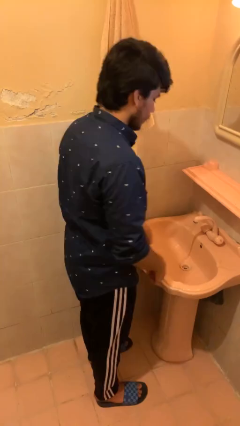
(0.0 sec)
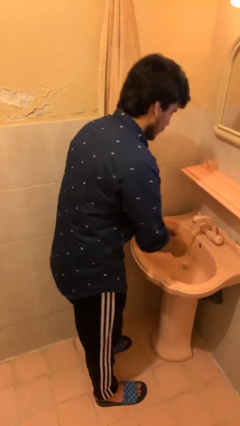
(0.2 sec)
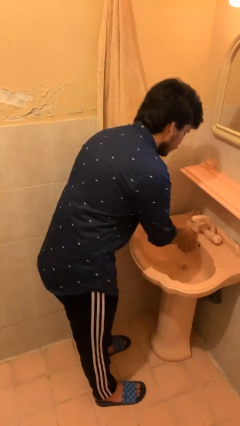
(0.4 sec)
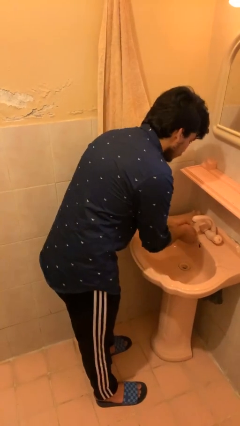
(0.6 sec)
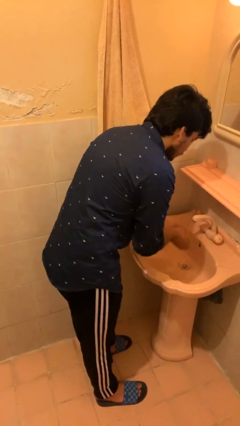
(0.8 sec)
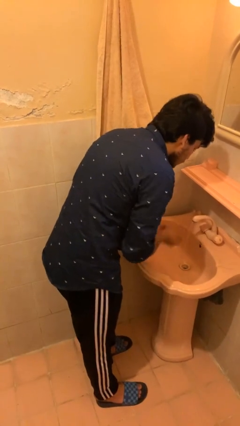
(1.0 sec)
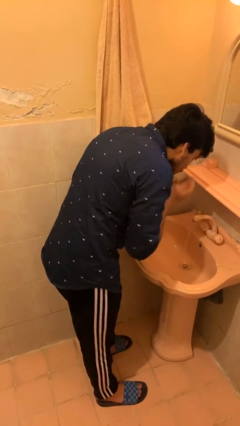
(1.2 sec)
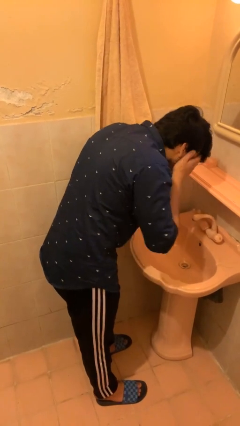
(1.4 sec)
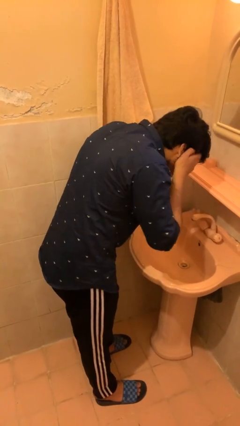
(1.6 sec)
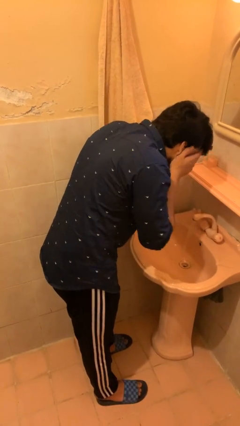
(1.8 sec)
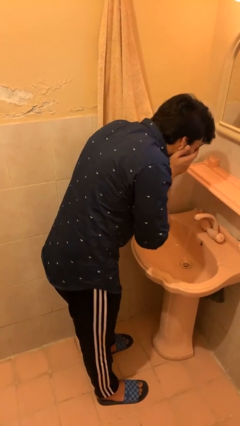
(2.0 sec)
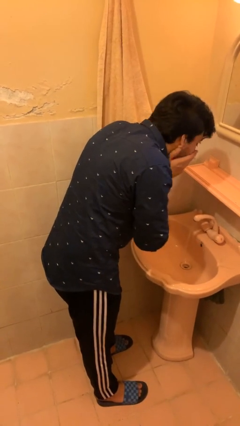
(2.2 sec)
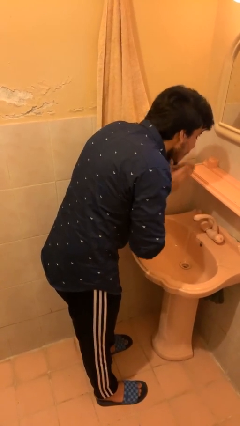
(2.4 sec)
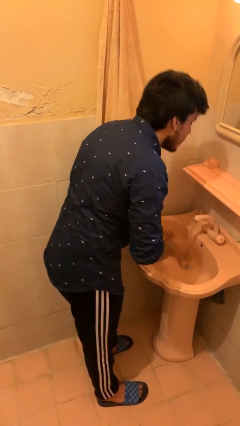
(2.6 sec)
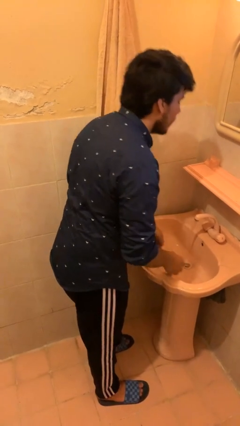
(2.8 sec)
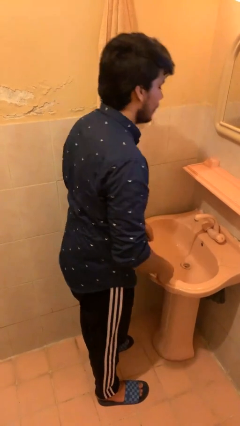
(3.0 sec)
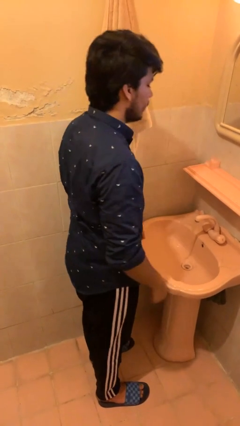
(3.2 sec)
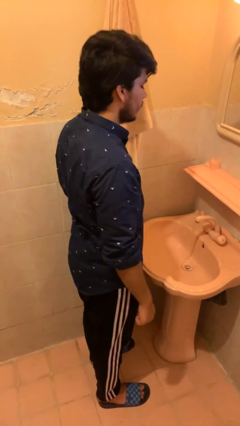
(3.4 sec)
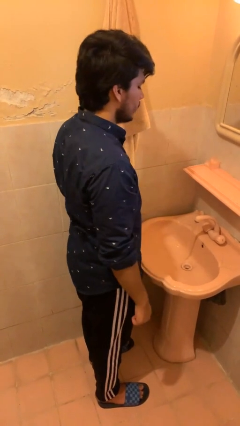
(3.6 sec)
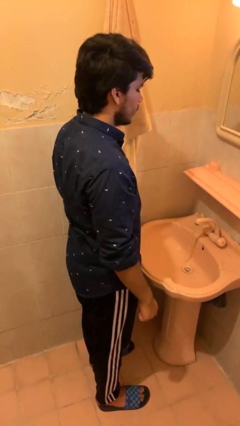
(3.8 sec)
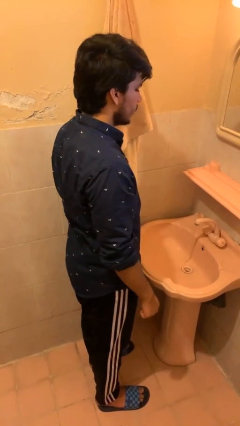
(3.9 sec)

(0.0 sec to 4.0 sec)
person washes face

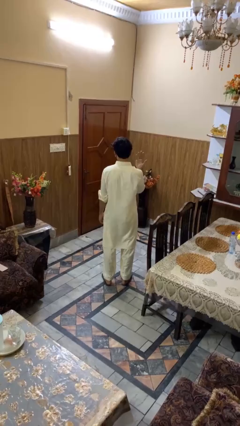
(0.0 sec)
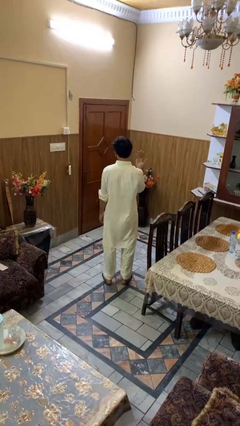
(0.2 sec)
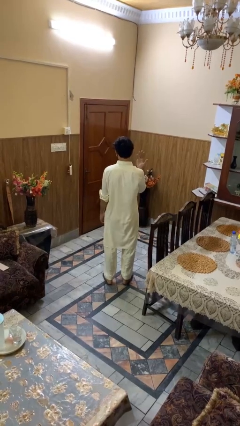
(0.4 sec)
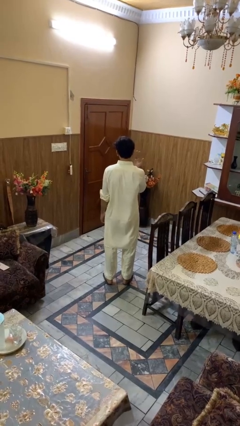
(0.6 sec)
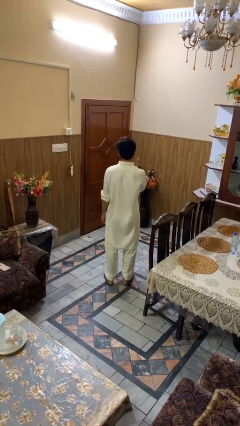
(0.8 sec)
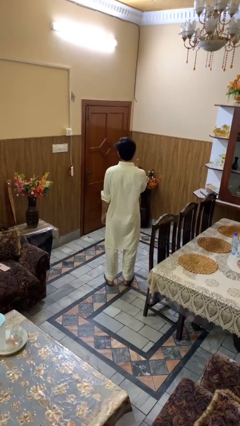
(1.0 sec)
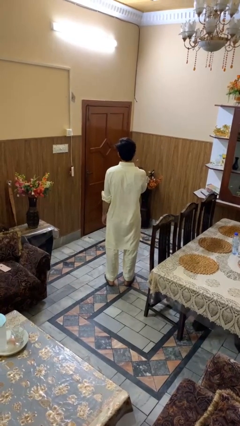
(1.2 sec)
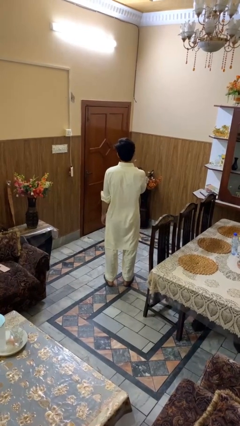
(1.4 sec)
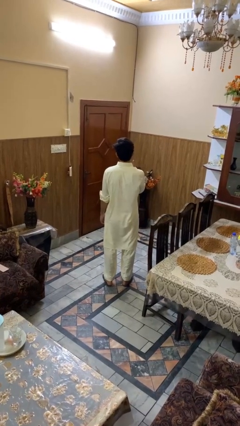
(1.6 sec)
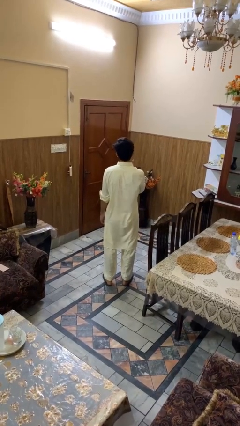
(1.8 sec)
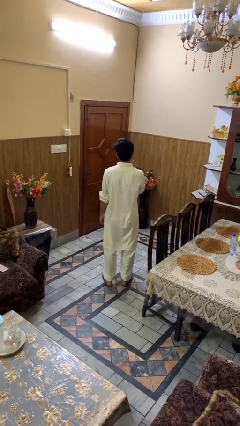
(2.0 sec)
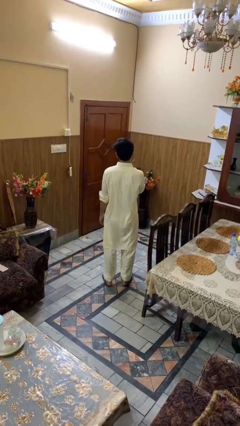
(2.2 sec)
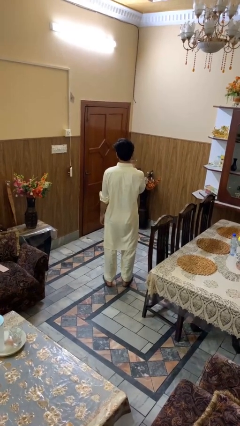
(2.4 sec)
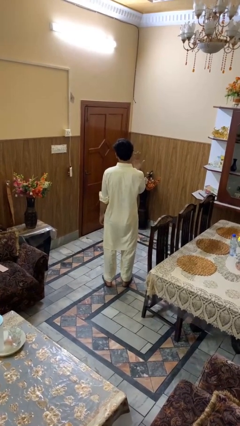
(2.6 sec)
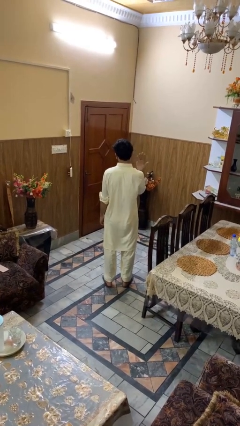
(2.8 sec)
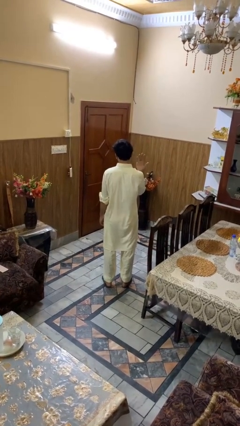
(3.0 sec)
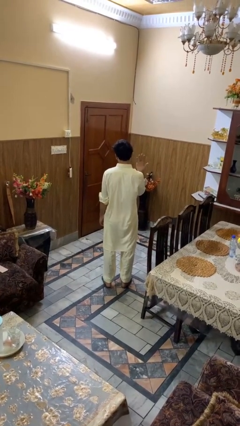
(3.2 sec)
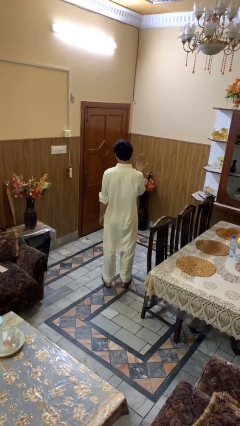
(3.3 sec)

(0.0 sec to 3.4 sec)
person licks fingers

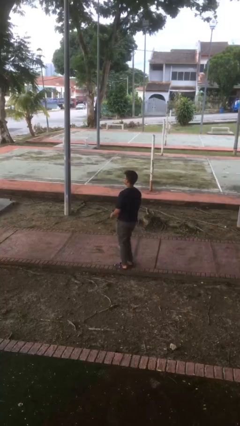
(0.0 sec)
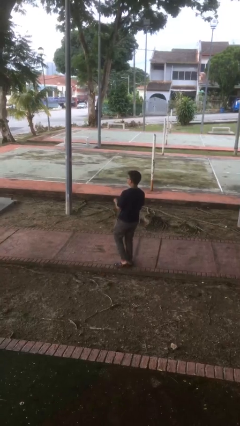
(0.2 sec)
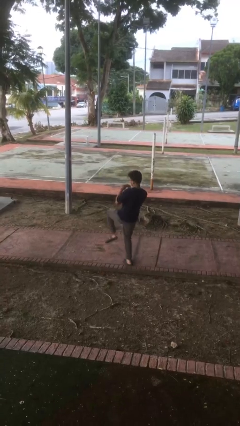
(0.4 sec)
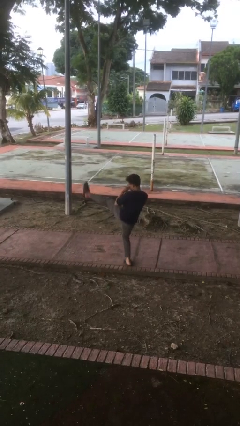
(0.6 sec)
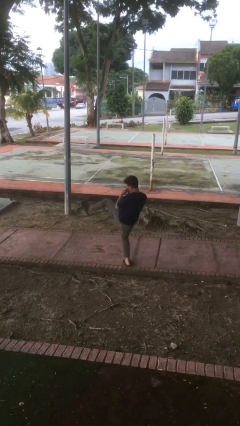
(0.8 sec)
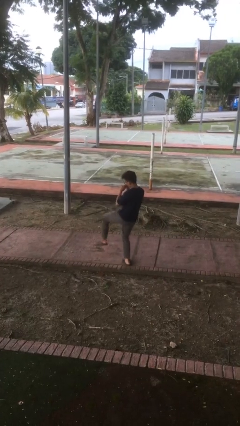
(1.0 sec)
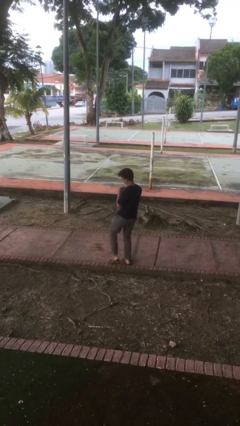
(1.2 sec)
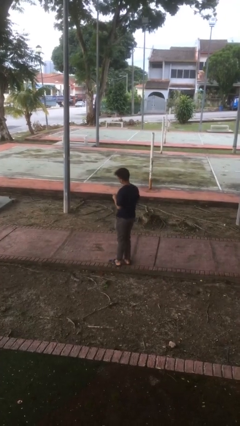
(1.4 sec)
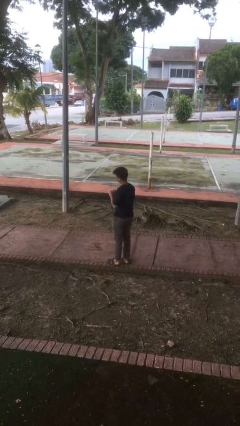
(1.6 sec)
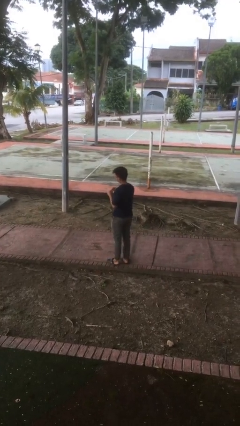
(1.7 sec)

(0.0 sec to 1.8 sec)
person karate kicks

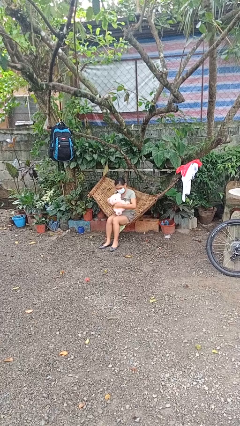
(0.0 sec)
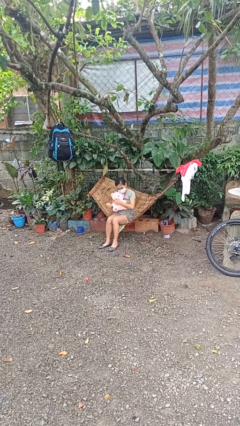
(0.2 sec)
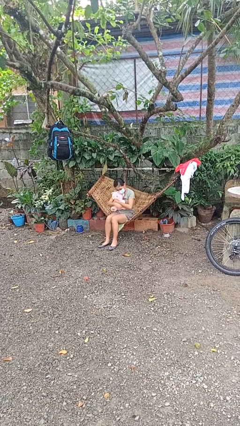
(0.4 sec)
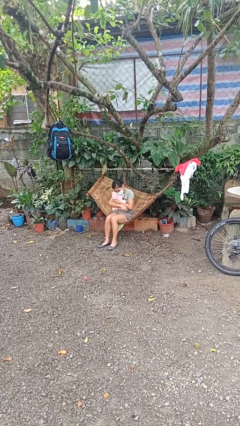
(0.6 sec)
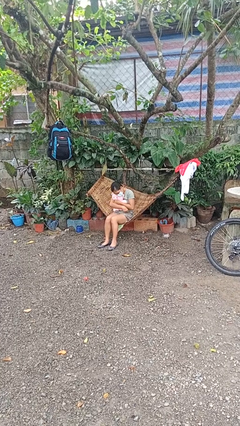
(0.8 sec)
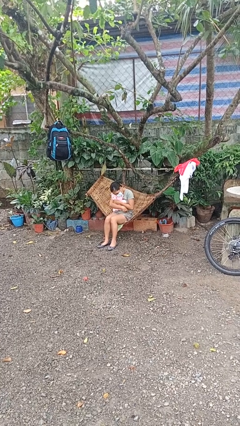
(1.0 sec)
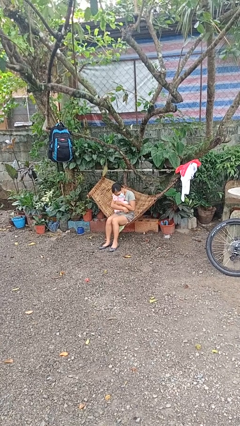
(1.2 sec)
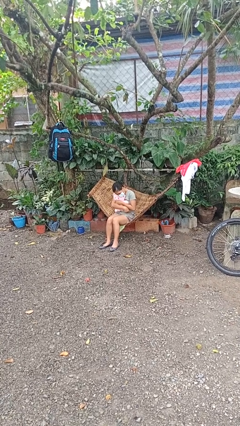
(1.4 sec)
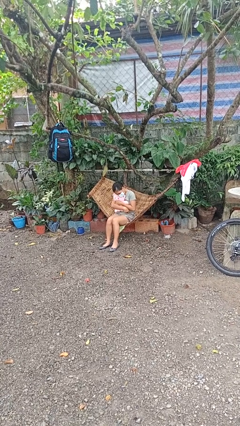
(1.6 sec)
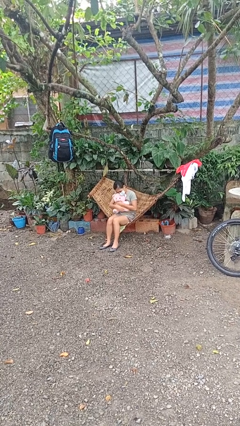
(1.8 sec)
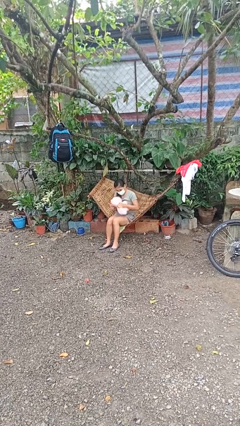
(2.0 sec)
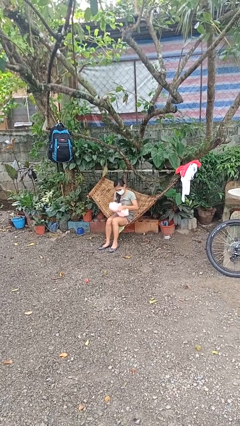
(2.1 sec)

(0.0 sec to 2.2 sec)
person hugs stuffed animal

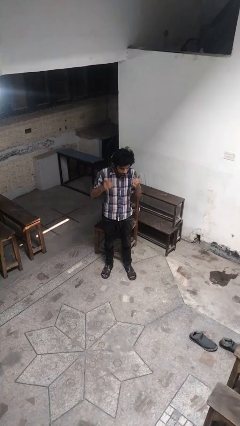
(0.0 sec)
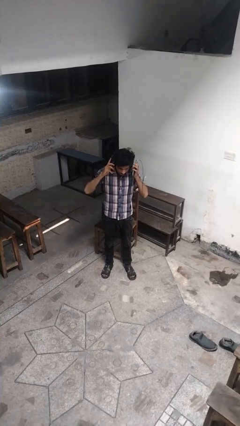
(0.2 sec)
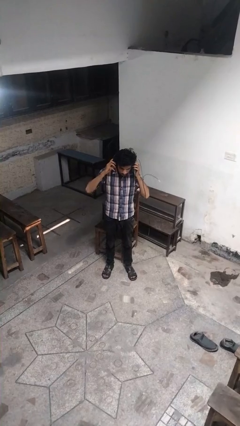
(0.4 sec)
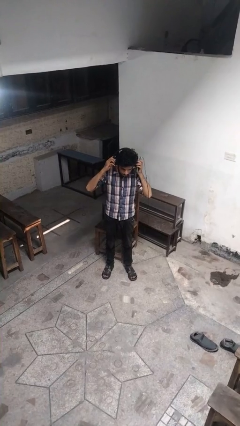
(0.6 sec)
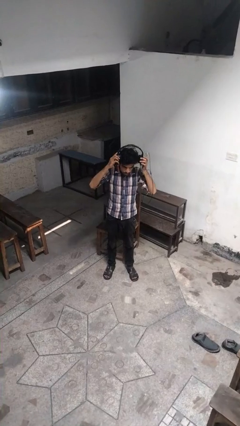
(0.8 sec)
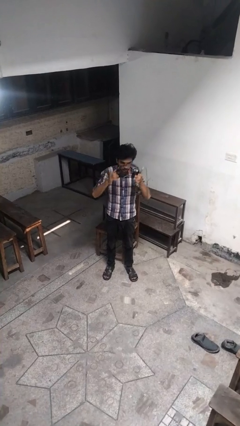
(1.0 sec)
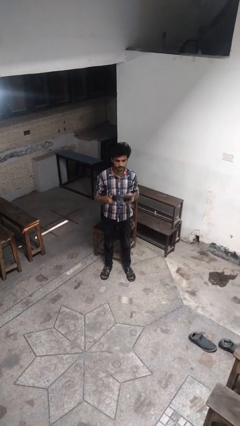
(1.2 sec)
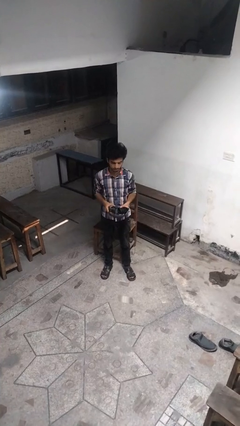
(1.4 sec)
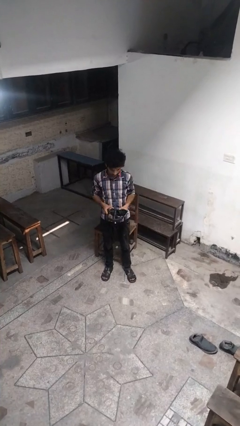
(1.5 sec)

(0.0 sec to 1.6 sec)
person takes off headphones

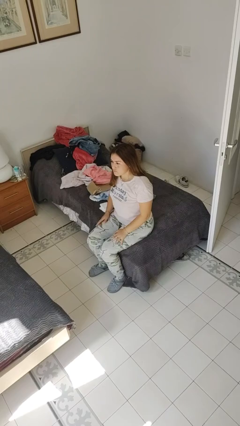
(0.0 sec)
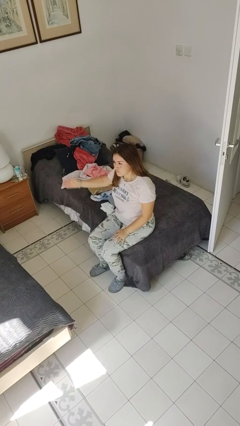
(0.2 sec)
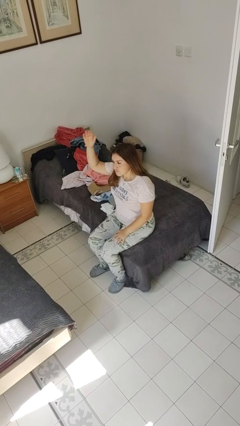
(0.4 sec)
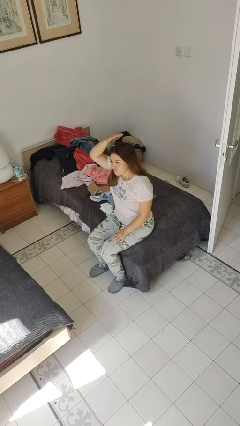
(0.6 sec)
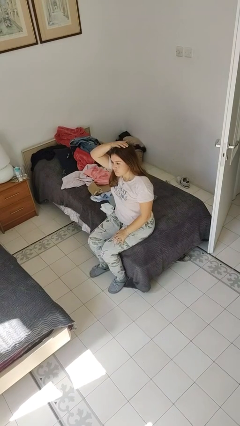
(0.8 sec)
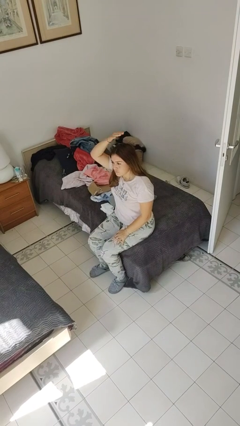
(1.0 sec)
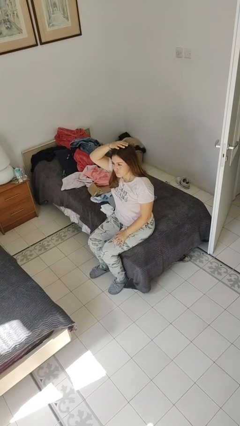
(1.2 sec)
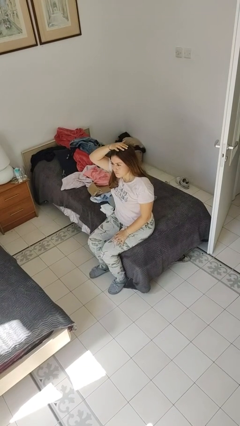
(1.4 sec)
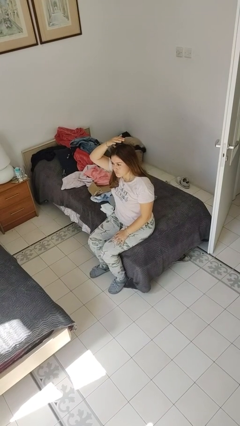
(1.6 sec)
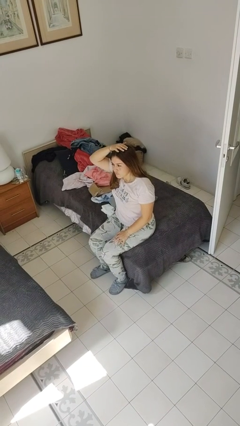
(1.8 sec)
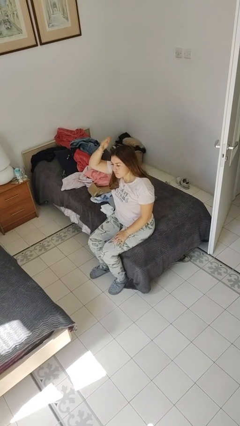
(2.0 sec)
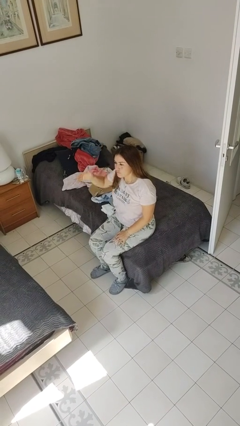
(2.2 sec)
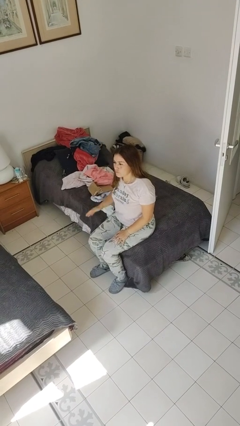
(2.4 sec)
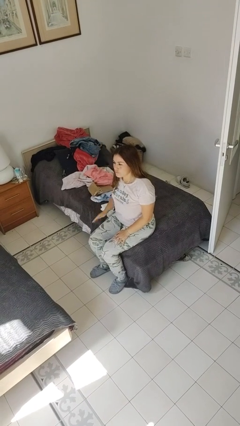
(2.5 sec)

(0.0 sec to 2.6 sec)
person pats head

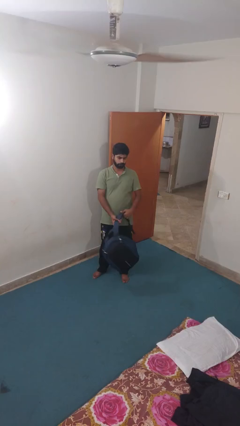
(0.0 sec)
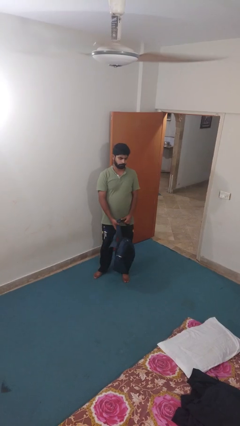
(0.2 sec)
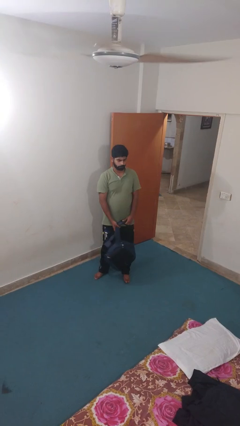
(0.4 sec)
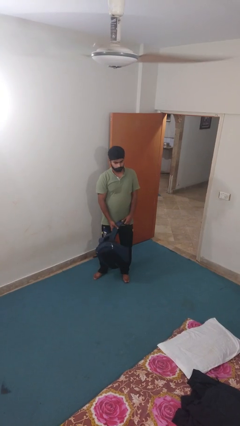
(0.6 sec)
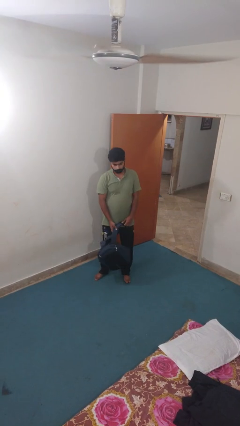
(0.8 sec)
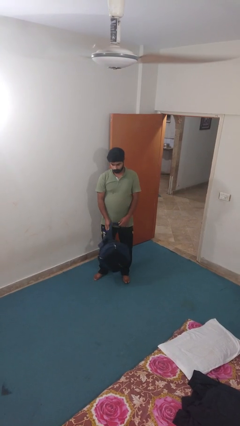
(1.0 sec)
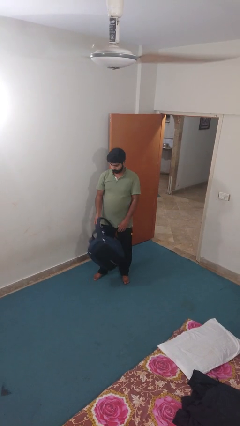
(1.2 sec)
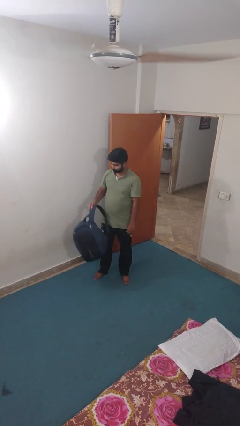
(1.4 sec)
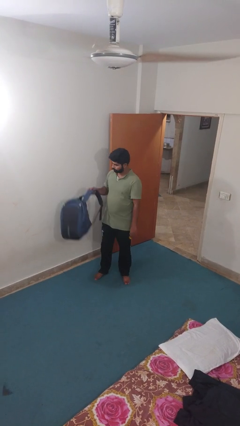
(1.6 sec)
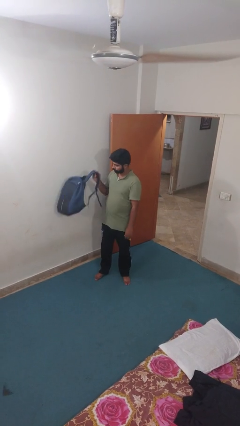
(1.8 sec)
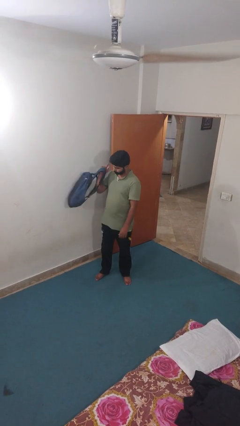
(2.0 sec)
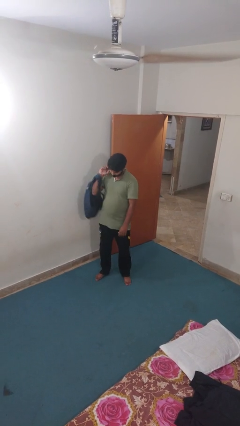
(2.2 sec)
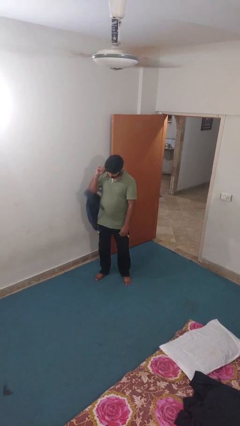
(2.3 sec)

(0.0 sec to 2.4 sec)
person drops object
